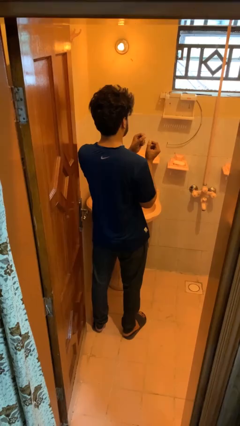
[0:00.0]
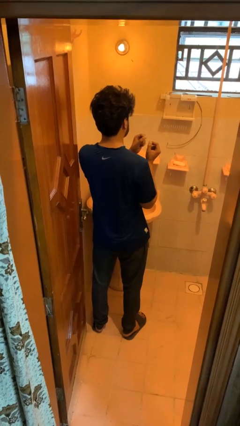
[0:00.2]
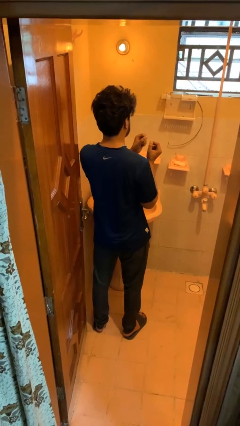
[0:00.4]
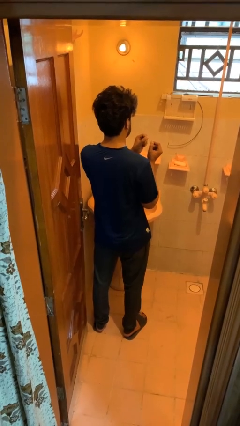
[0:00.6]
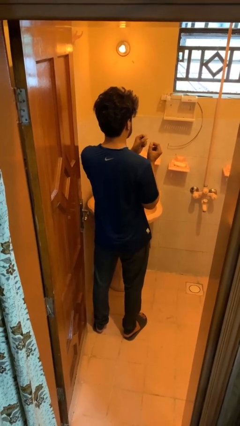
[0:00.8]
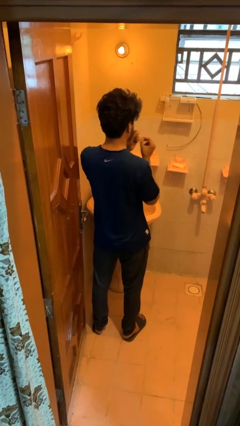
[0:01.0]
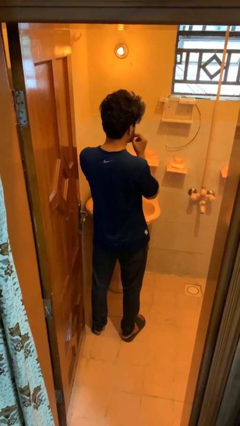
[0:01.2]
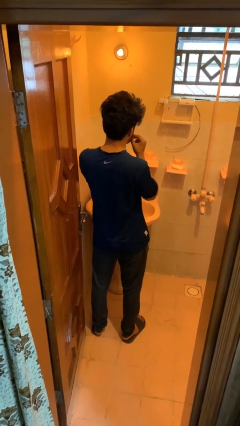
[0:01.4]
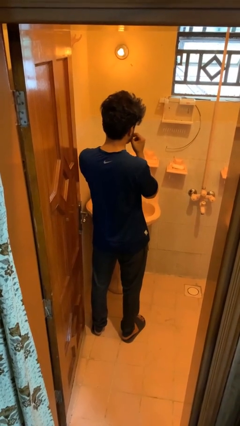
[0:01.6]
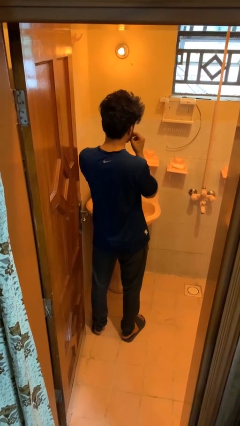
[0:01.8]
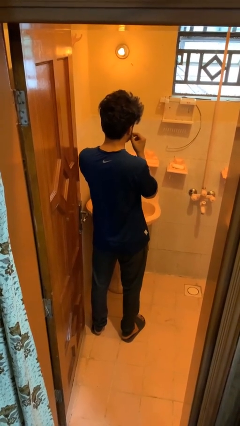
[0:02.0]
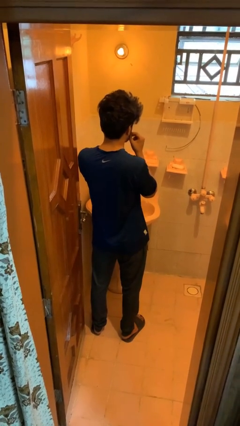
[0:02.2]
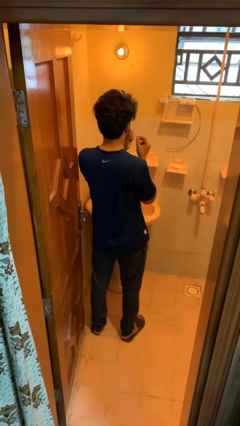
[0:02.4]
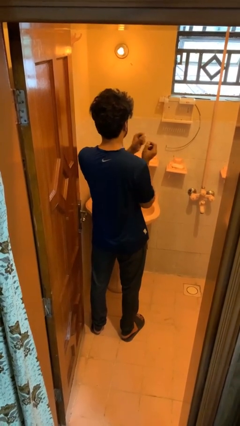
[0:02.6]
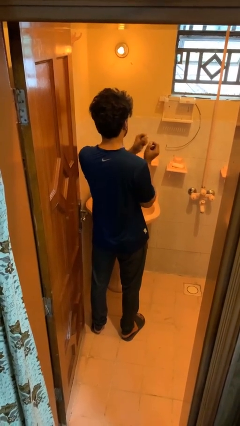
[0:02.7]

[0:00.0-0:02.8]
person applies deodorant

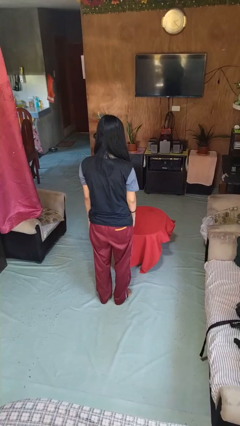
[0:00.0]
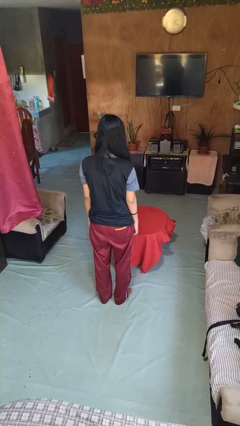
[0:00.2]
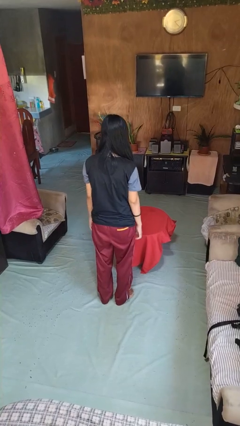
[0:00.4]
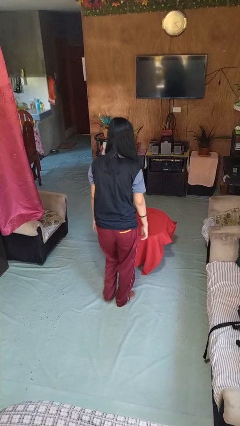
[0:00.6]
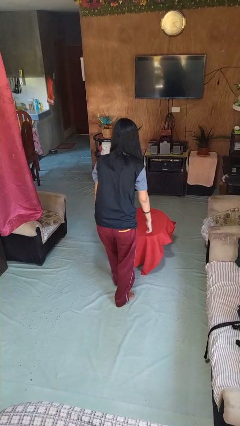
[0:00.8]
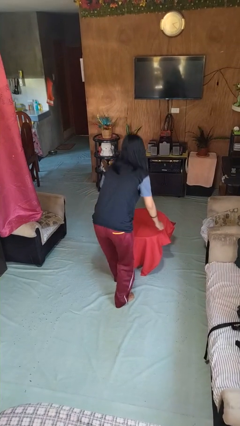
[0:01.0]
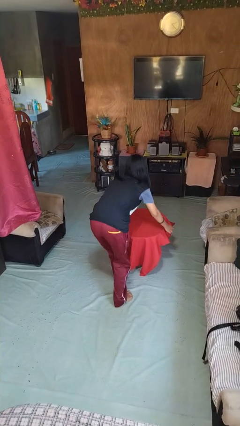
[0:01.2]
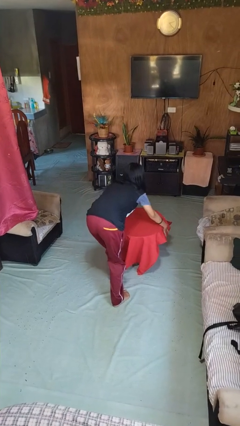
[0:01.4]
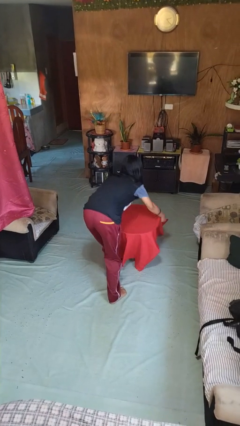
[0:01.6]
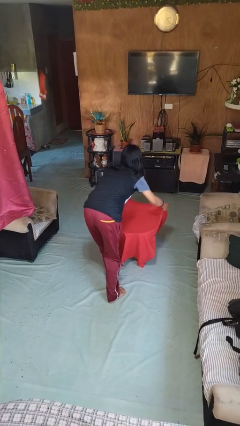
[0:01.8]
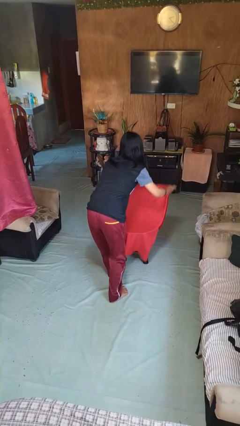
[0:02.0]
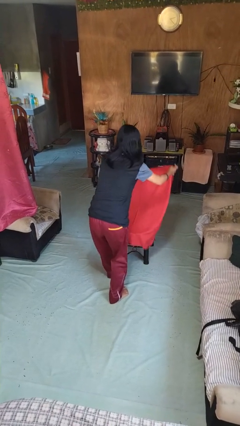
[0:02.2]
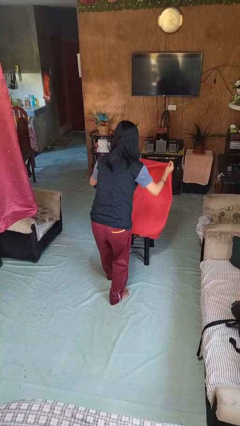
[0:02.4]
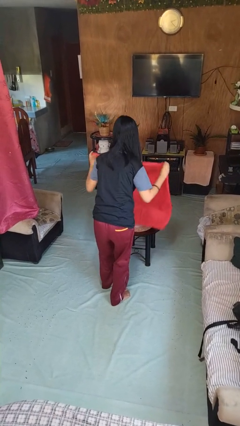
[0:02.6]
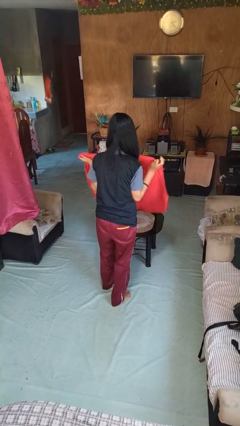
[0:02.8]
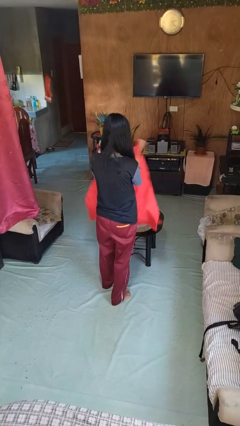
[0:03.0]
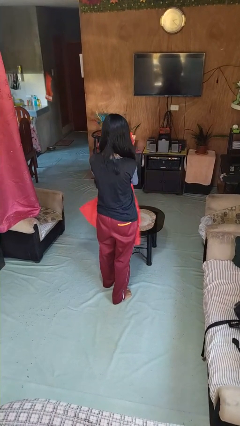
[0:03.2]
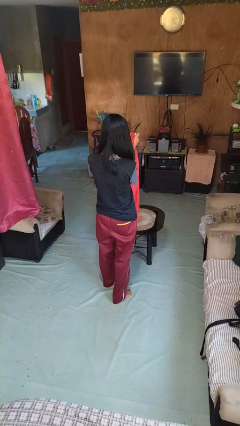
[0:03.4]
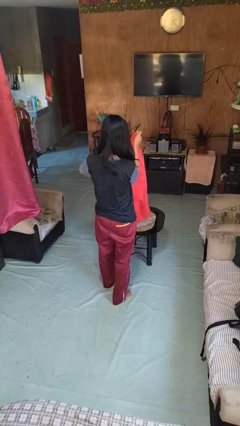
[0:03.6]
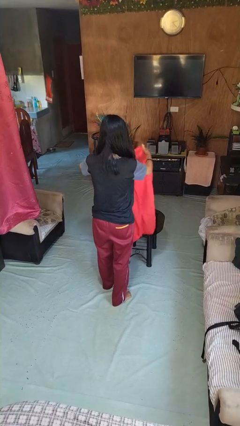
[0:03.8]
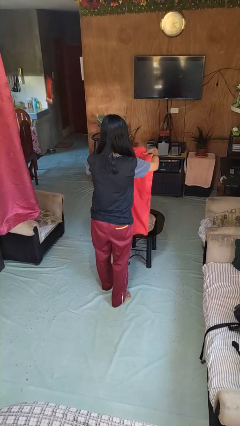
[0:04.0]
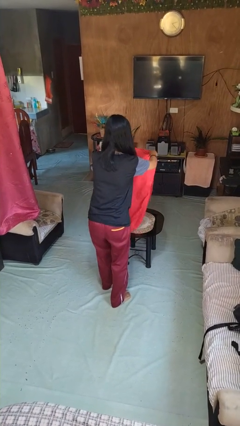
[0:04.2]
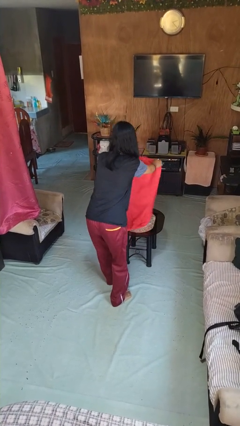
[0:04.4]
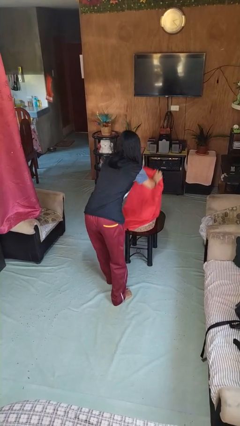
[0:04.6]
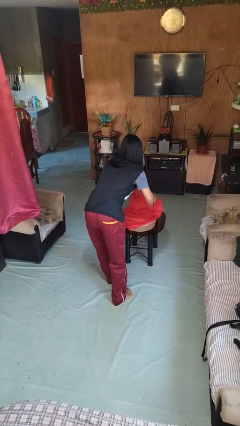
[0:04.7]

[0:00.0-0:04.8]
person folds tablecloth

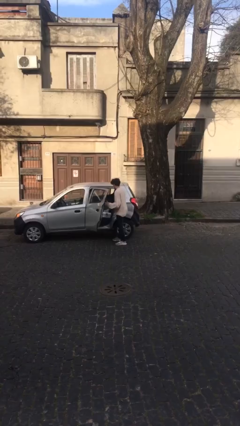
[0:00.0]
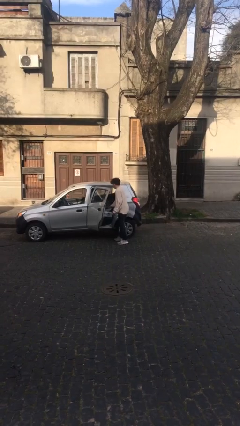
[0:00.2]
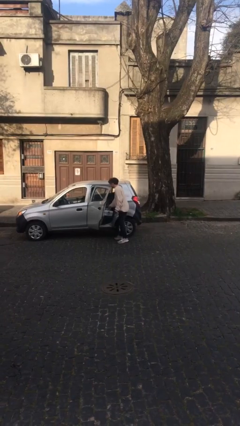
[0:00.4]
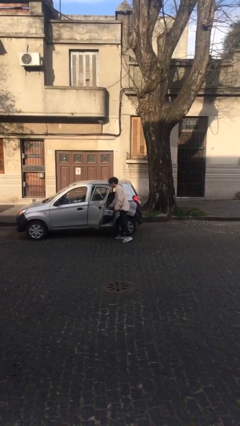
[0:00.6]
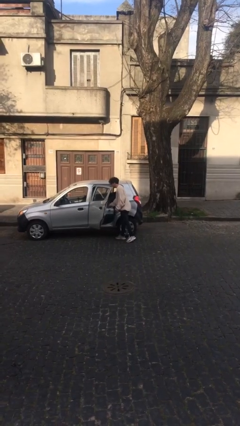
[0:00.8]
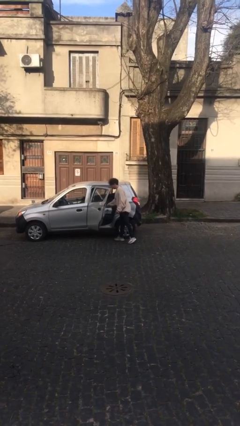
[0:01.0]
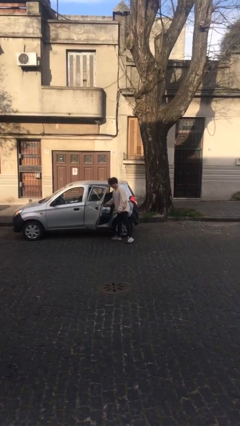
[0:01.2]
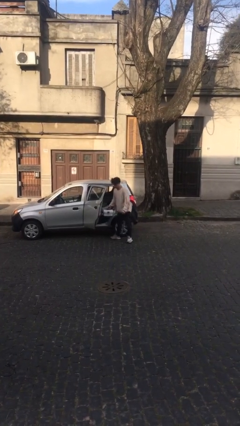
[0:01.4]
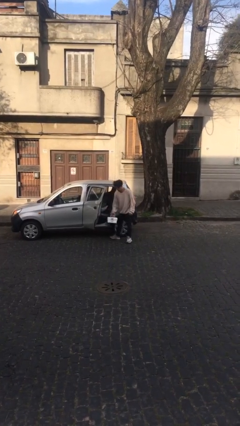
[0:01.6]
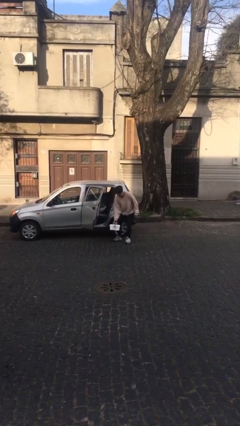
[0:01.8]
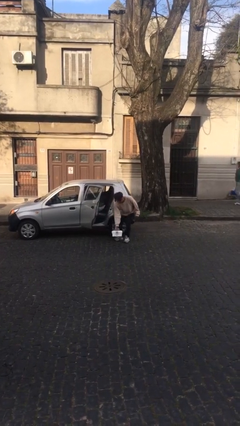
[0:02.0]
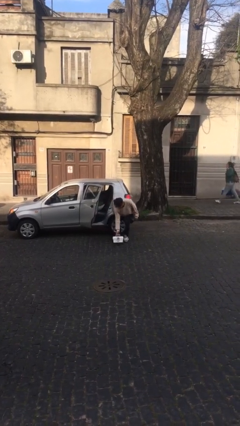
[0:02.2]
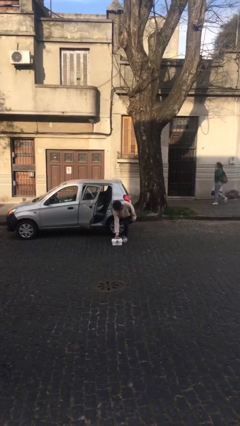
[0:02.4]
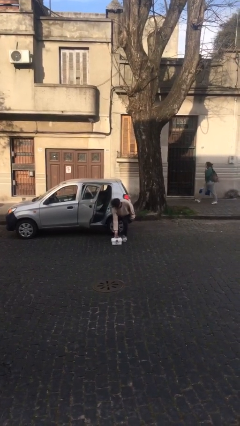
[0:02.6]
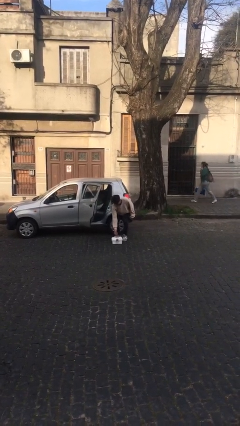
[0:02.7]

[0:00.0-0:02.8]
person unloads car

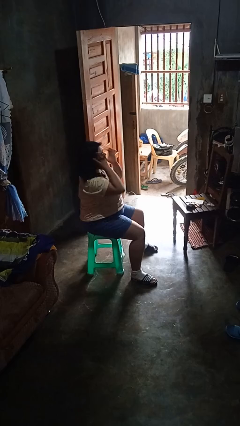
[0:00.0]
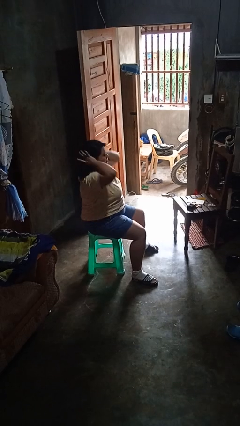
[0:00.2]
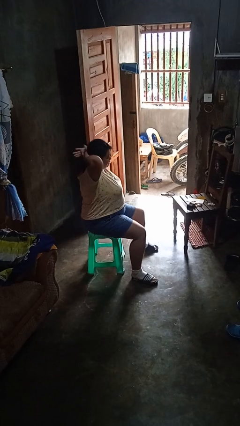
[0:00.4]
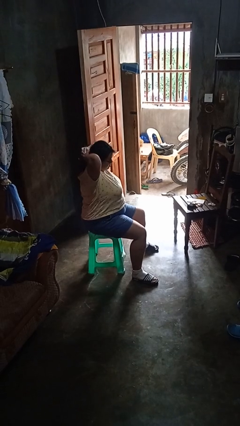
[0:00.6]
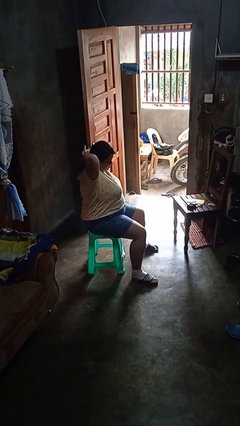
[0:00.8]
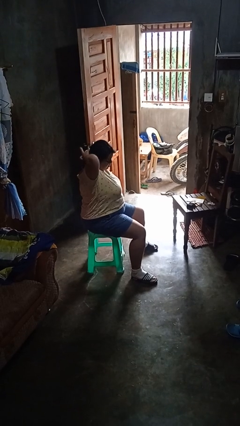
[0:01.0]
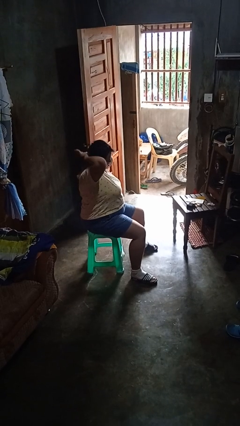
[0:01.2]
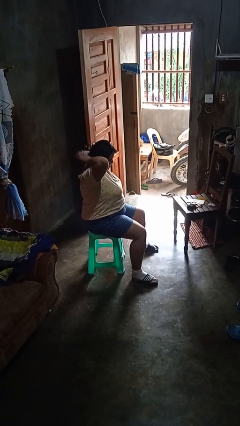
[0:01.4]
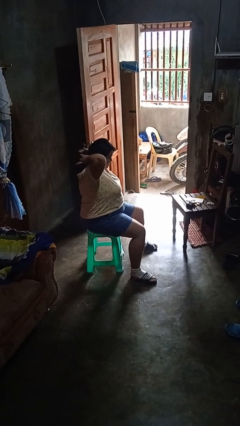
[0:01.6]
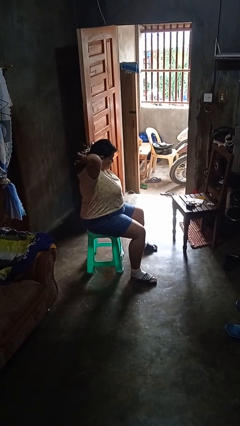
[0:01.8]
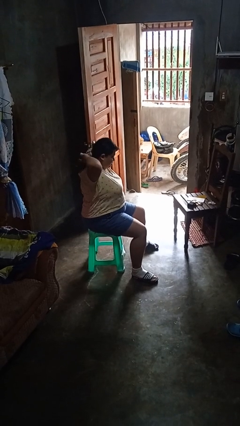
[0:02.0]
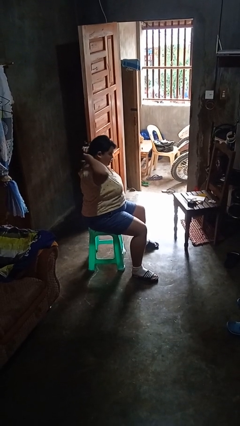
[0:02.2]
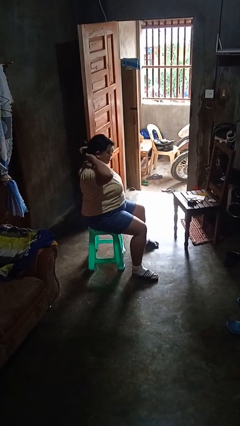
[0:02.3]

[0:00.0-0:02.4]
person puts hair in ponytail

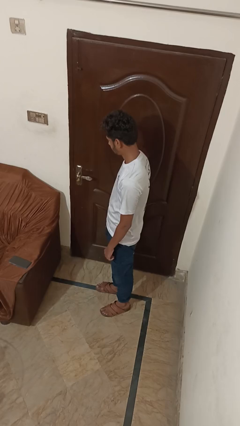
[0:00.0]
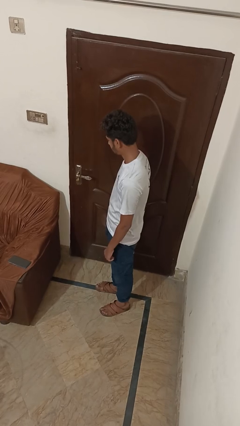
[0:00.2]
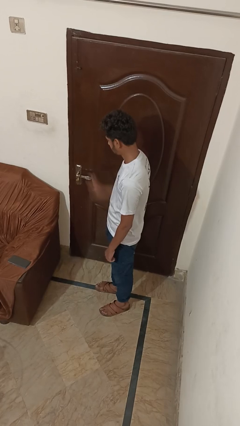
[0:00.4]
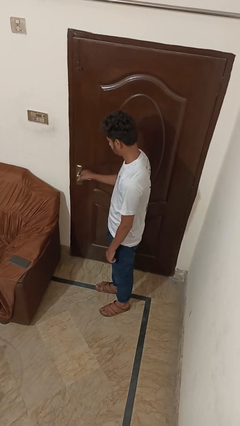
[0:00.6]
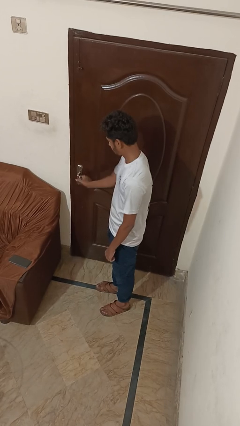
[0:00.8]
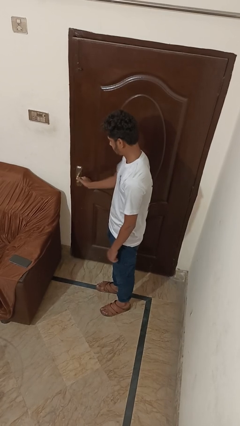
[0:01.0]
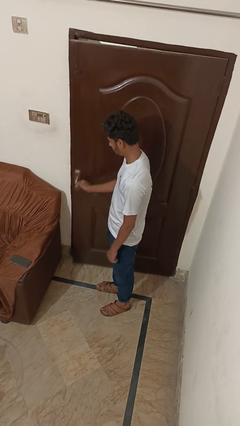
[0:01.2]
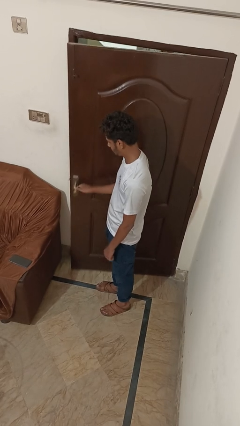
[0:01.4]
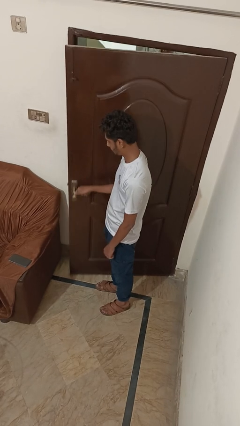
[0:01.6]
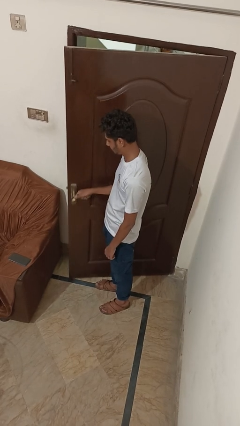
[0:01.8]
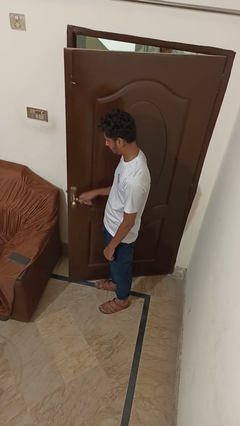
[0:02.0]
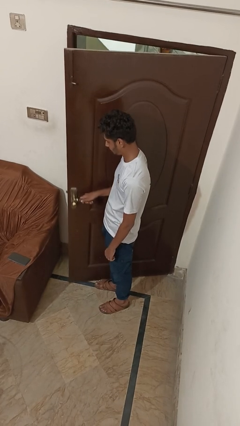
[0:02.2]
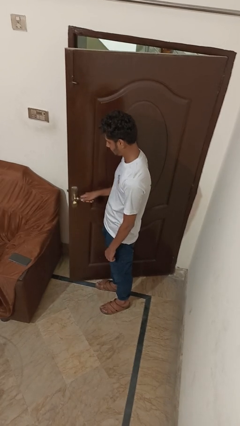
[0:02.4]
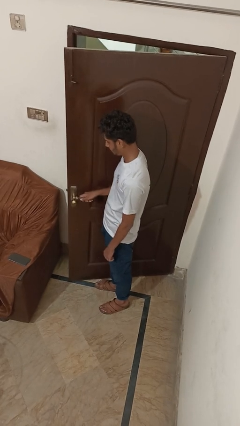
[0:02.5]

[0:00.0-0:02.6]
person opens facility door

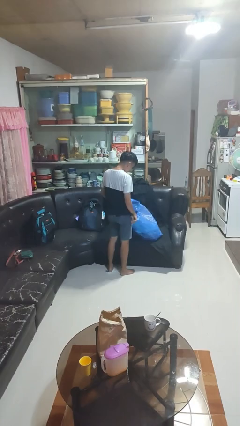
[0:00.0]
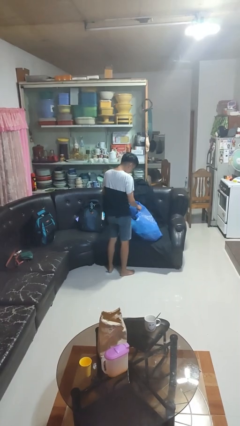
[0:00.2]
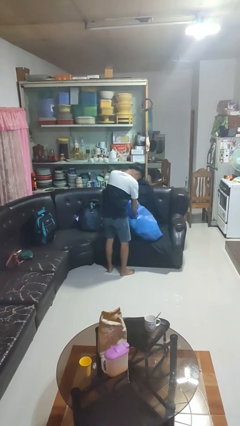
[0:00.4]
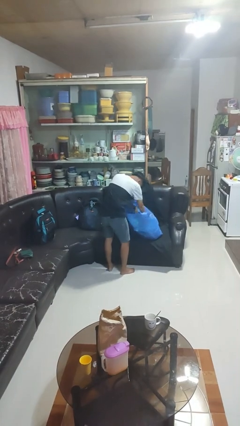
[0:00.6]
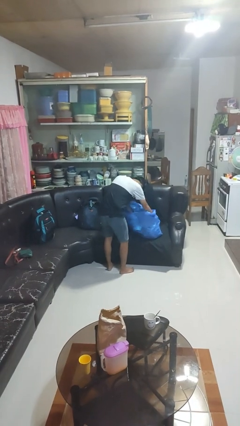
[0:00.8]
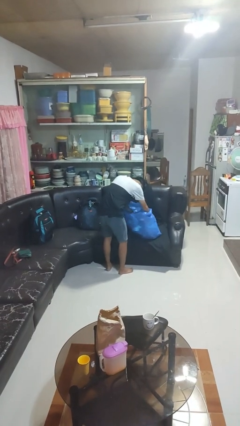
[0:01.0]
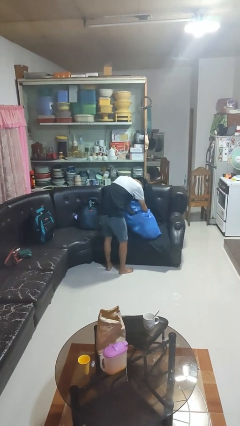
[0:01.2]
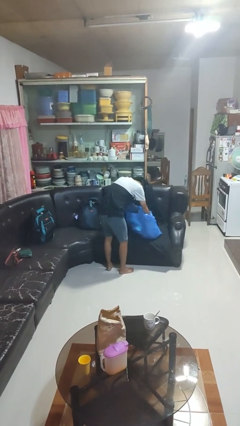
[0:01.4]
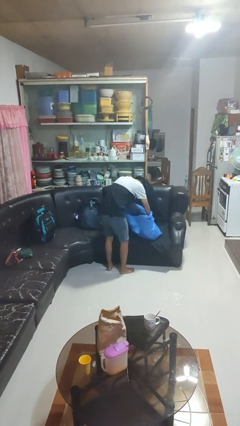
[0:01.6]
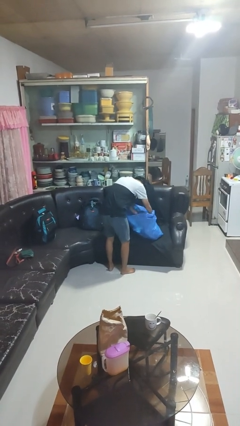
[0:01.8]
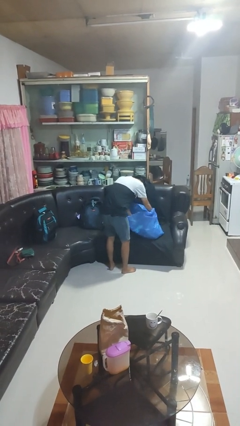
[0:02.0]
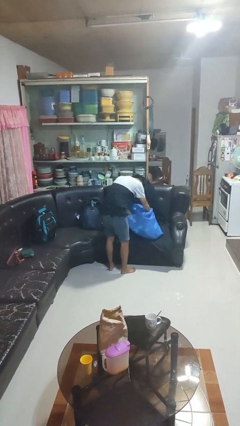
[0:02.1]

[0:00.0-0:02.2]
person searches in bag
